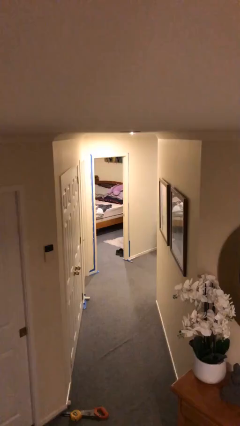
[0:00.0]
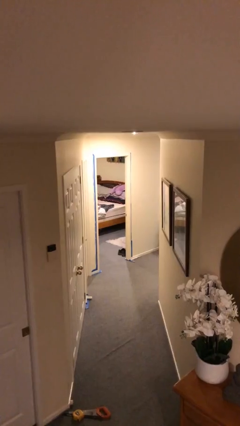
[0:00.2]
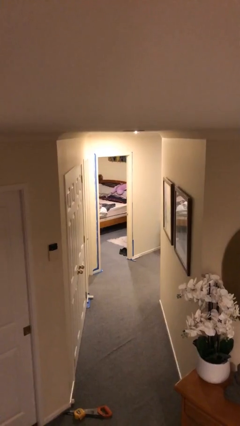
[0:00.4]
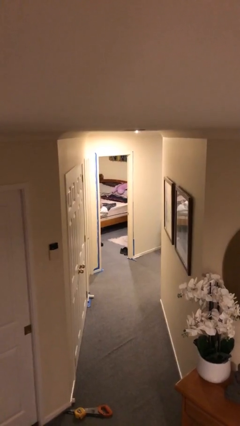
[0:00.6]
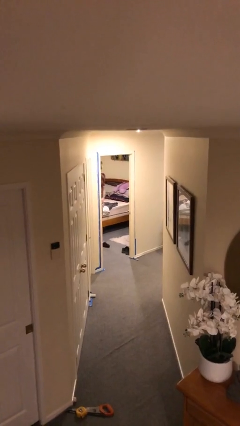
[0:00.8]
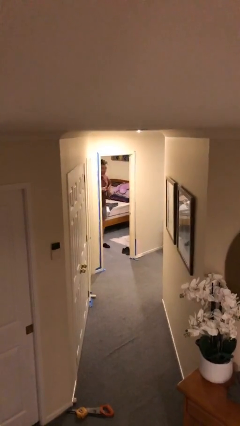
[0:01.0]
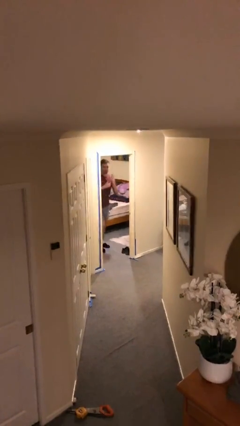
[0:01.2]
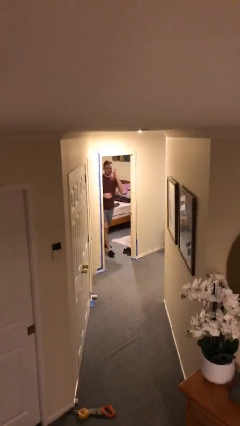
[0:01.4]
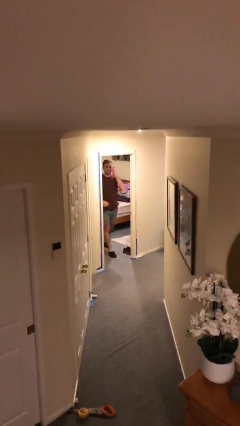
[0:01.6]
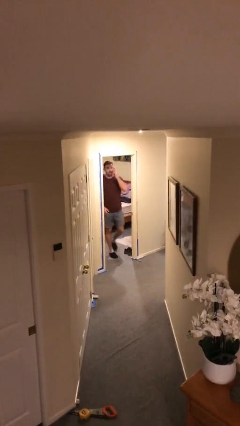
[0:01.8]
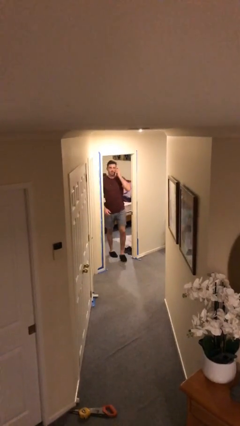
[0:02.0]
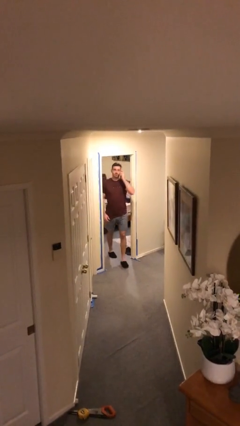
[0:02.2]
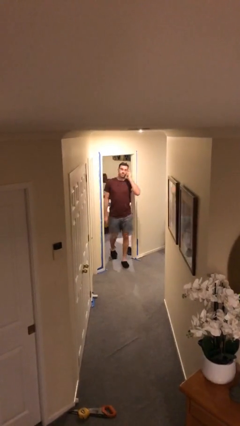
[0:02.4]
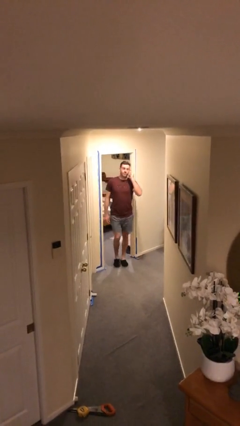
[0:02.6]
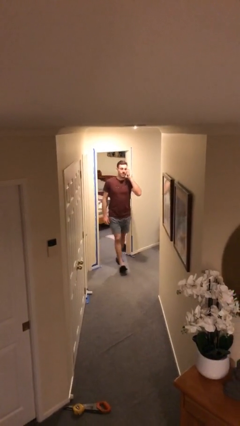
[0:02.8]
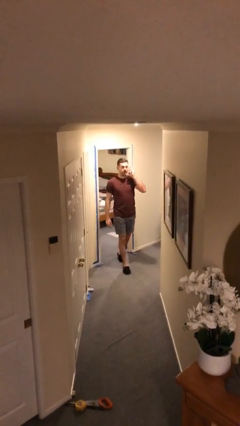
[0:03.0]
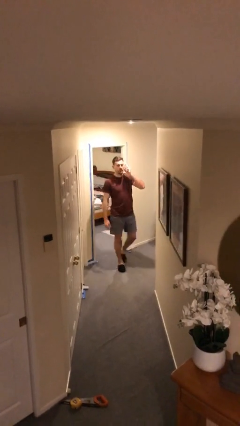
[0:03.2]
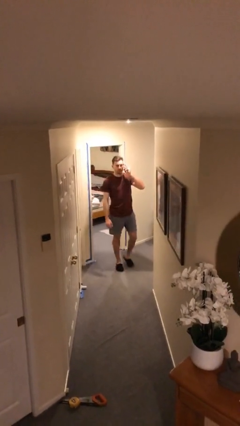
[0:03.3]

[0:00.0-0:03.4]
person enters scene through structure

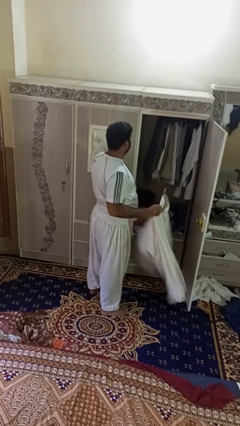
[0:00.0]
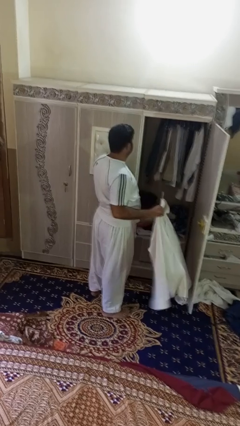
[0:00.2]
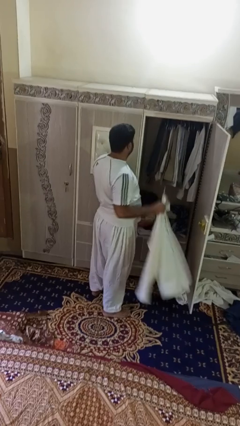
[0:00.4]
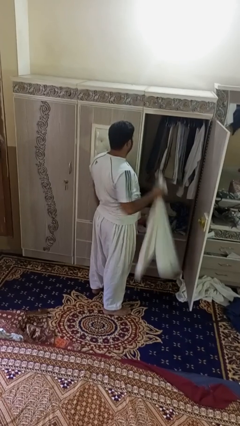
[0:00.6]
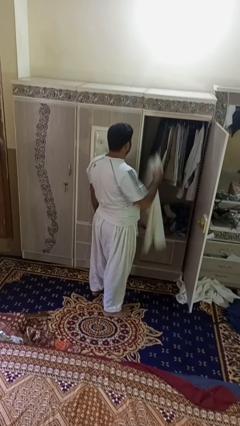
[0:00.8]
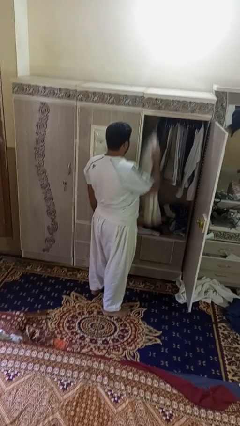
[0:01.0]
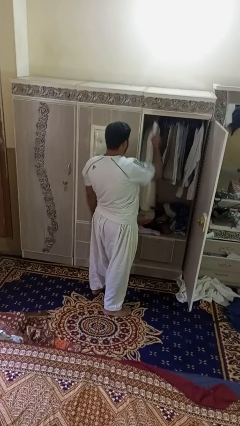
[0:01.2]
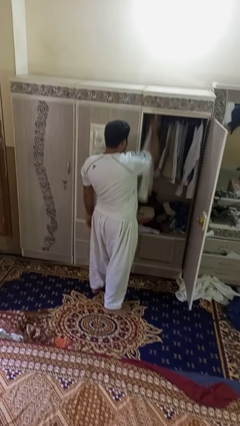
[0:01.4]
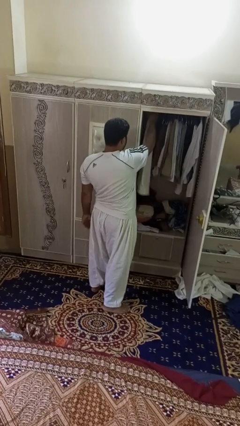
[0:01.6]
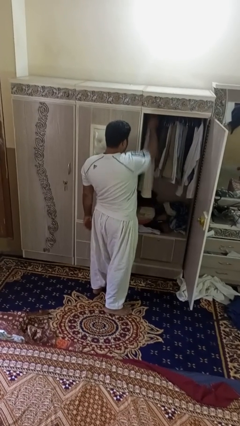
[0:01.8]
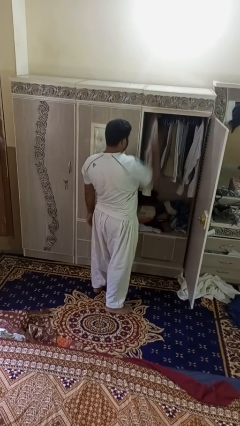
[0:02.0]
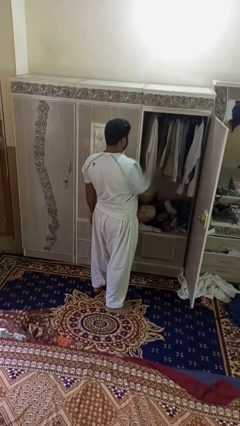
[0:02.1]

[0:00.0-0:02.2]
person puts clothes into closet

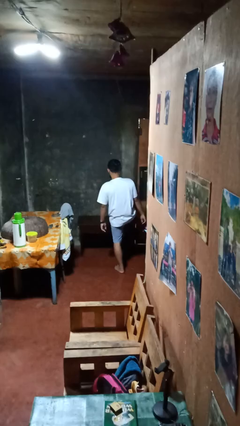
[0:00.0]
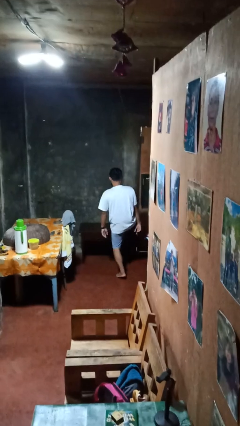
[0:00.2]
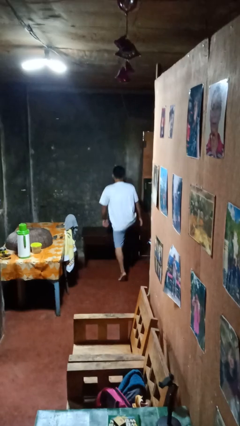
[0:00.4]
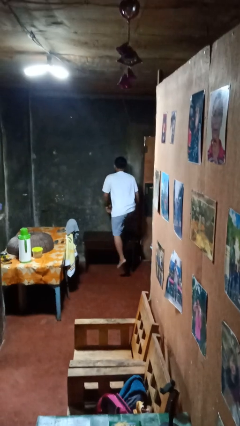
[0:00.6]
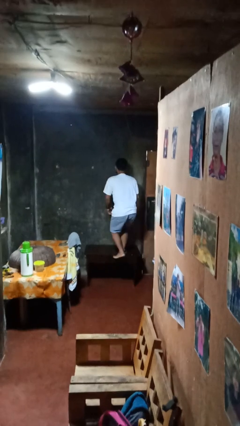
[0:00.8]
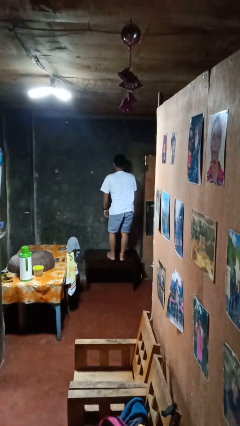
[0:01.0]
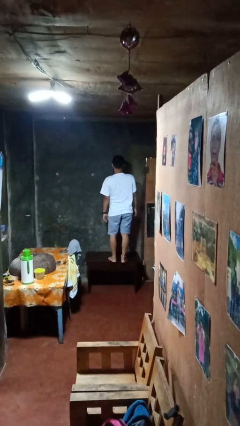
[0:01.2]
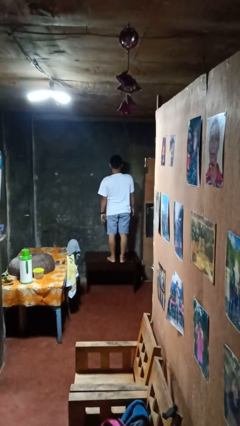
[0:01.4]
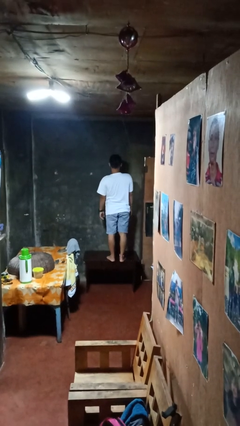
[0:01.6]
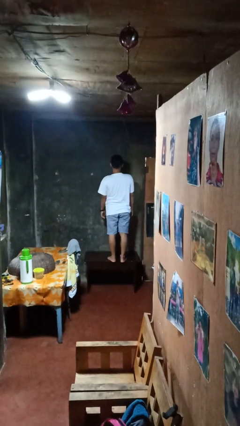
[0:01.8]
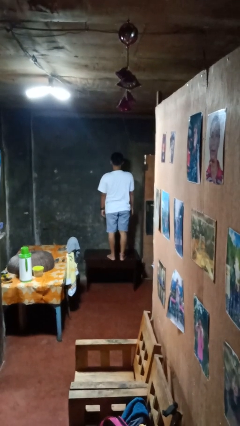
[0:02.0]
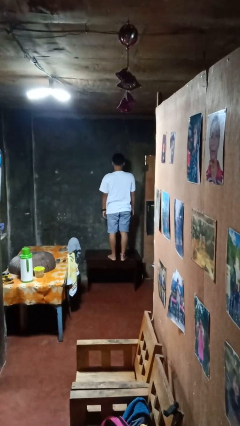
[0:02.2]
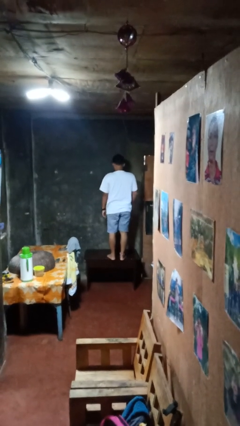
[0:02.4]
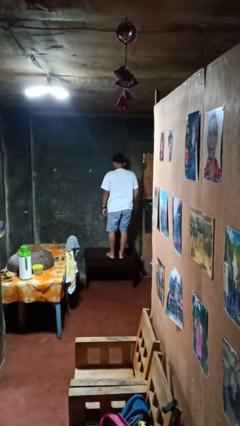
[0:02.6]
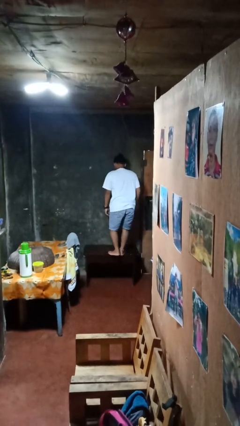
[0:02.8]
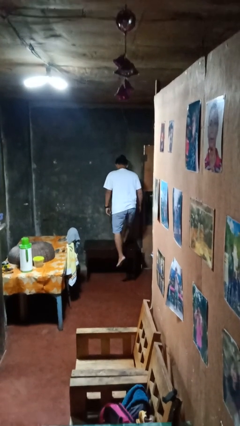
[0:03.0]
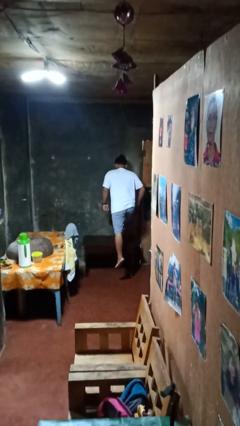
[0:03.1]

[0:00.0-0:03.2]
person climbs on table

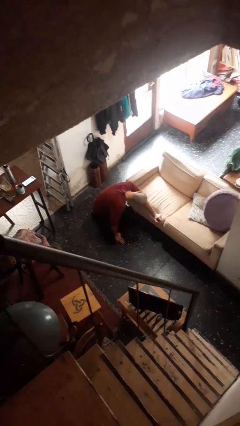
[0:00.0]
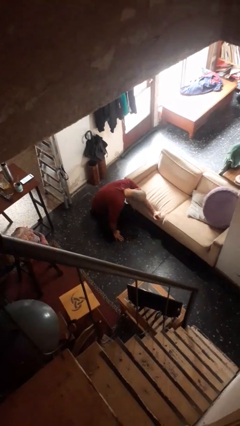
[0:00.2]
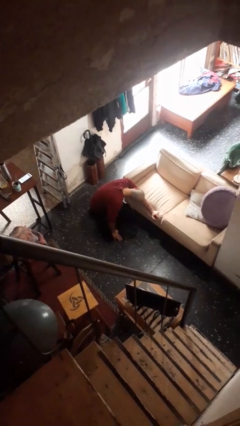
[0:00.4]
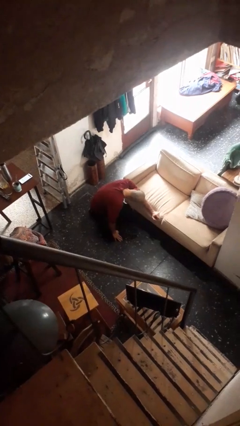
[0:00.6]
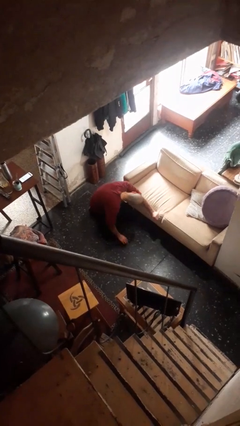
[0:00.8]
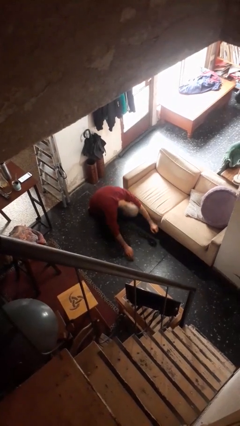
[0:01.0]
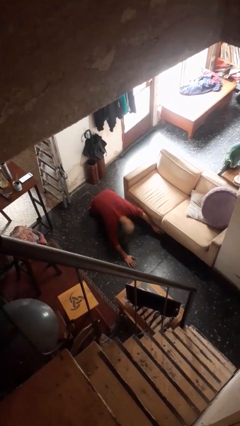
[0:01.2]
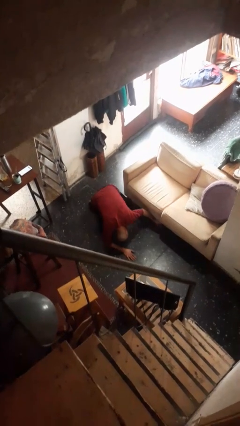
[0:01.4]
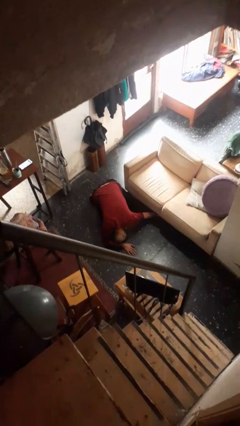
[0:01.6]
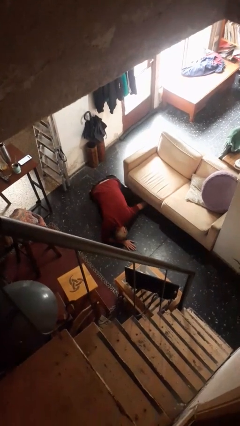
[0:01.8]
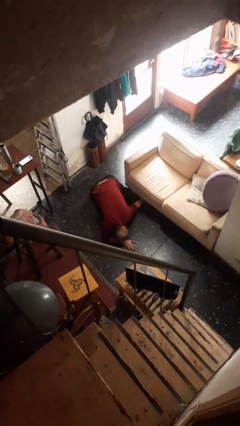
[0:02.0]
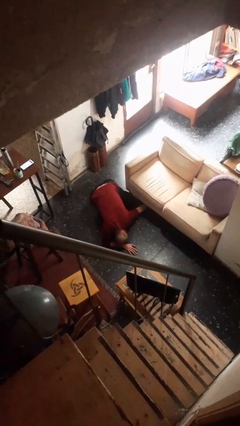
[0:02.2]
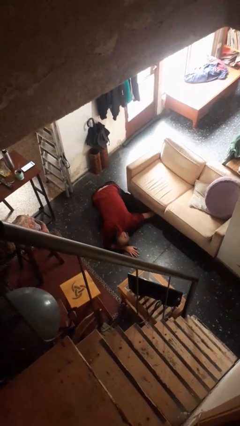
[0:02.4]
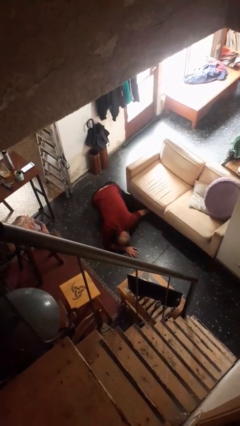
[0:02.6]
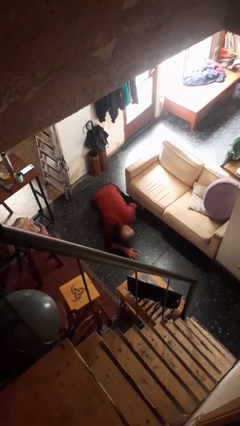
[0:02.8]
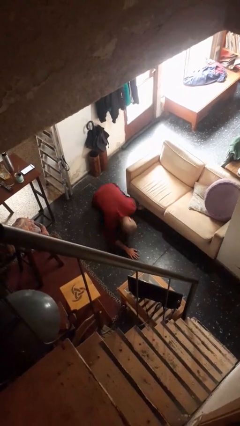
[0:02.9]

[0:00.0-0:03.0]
person searches under couch

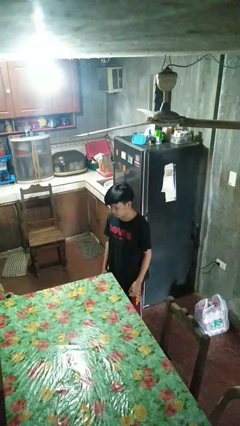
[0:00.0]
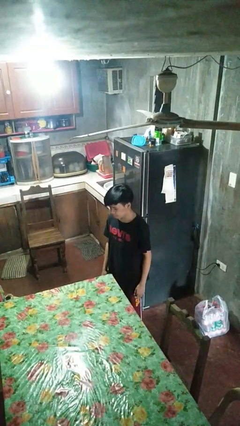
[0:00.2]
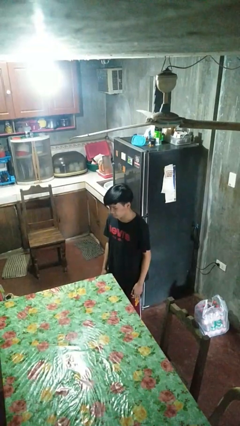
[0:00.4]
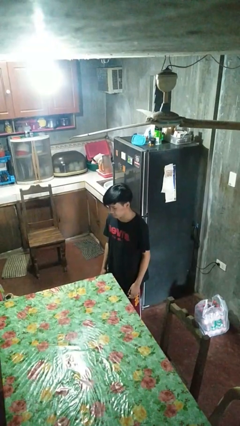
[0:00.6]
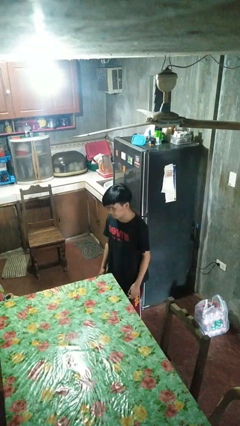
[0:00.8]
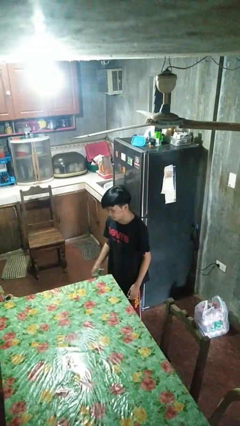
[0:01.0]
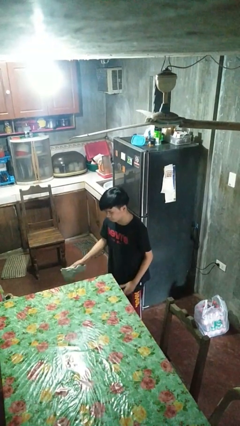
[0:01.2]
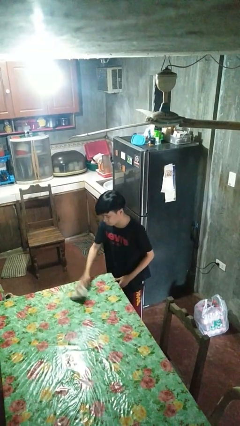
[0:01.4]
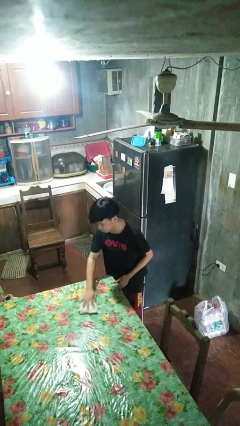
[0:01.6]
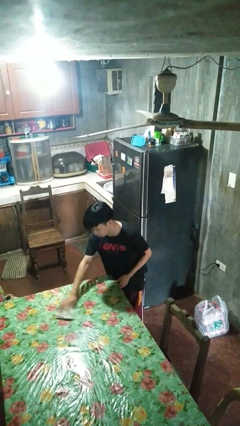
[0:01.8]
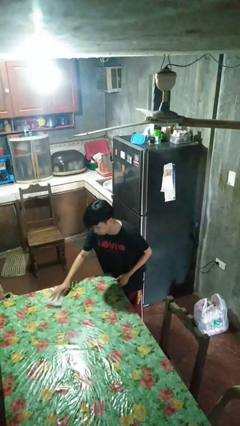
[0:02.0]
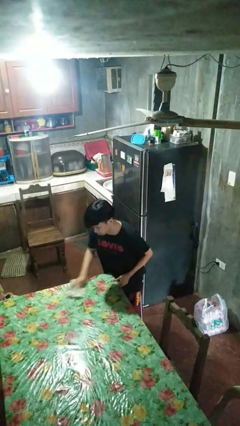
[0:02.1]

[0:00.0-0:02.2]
person cleans table with rag

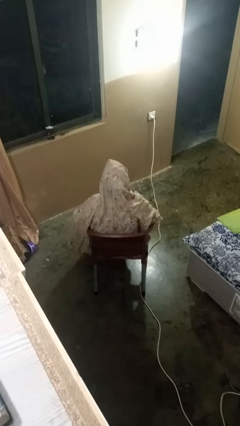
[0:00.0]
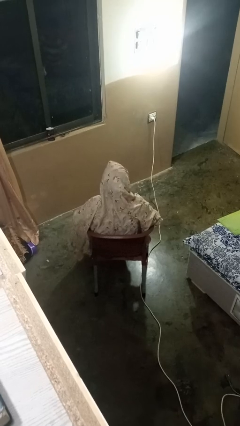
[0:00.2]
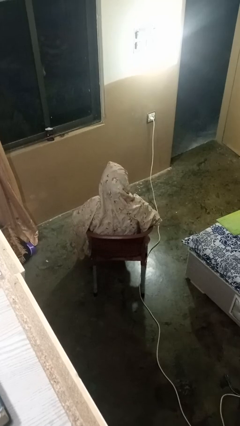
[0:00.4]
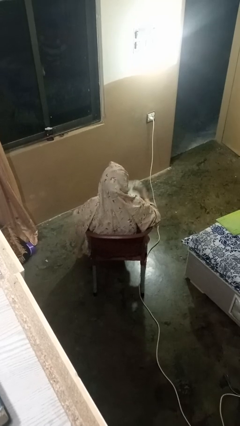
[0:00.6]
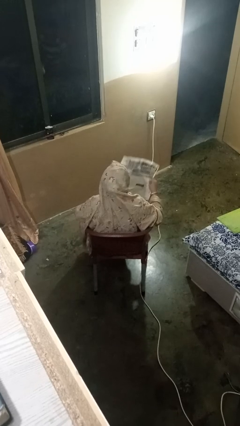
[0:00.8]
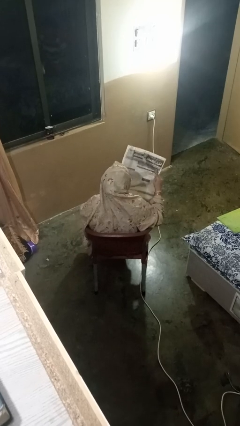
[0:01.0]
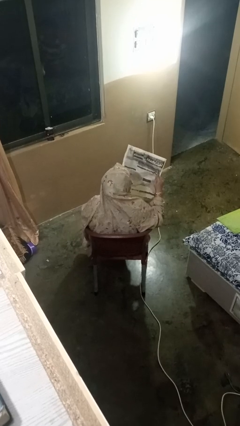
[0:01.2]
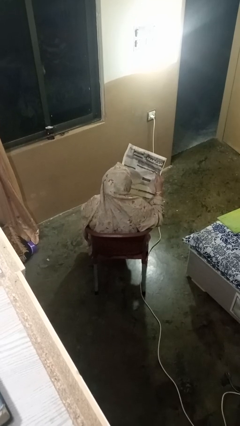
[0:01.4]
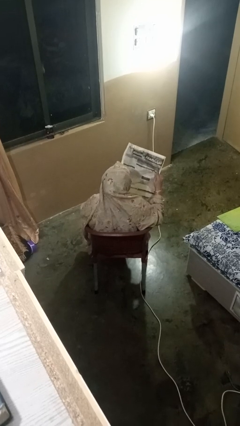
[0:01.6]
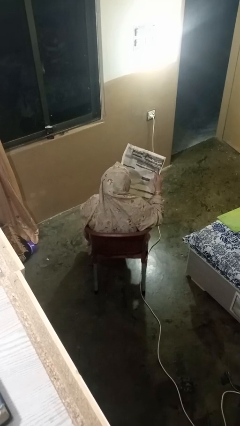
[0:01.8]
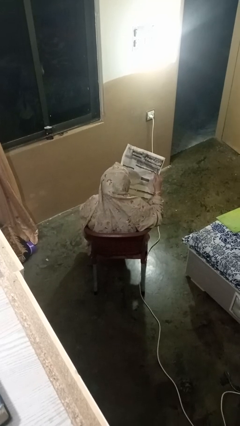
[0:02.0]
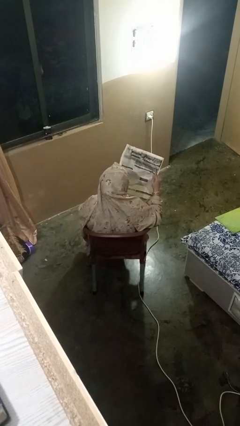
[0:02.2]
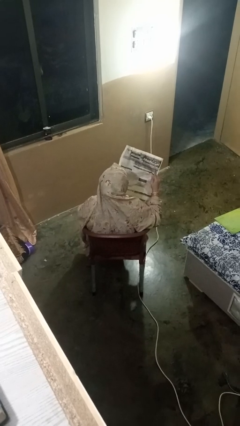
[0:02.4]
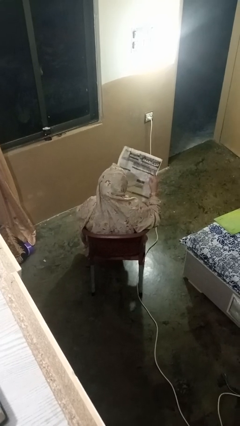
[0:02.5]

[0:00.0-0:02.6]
person reads newspaper

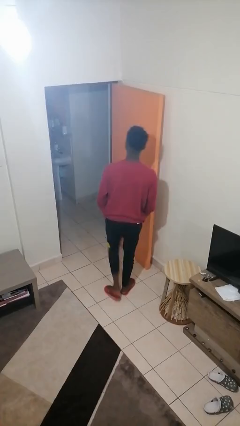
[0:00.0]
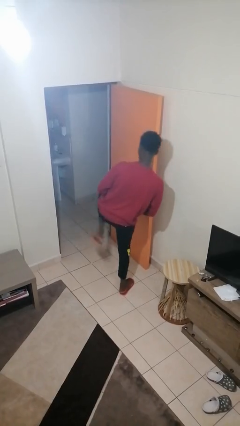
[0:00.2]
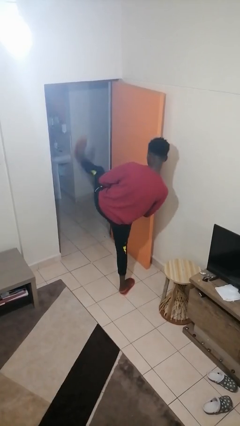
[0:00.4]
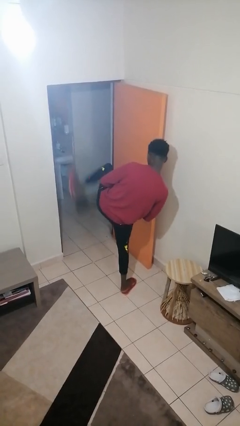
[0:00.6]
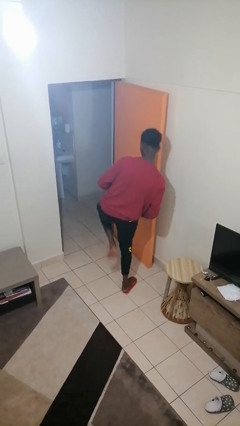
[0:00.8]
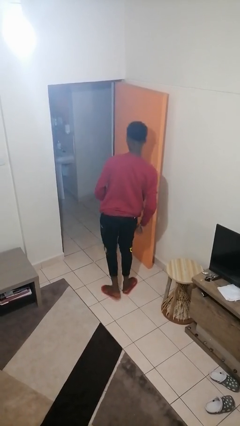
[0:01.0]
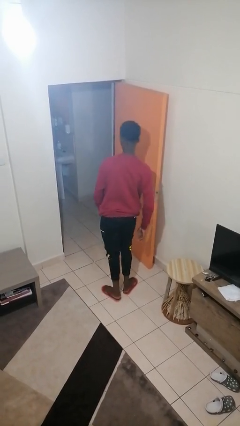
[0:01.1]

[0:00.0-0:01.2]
person karate kicks
